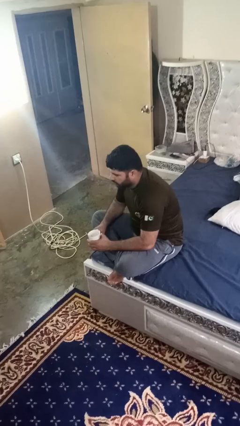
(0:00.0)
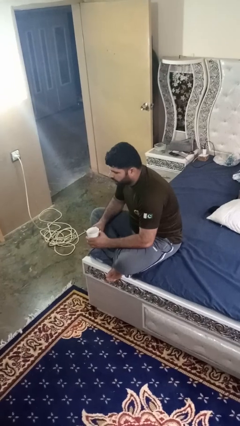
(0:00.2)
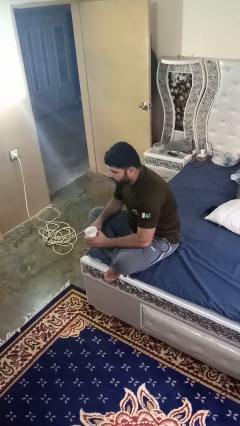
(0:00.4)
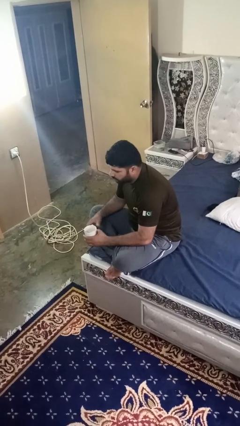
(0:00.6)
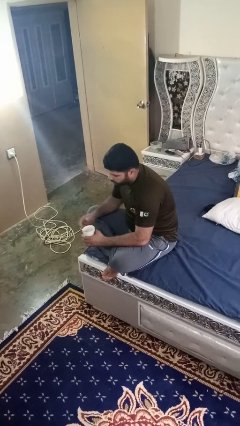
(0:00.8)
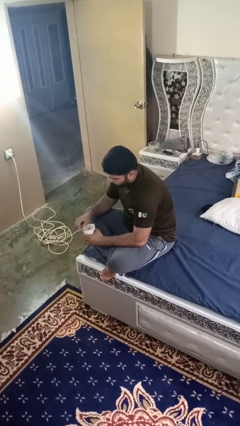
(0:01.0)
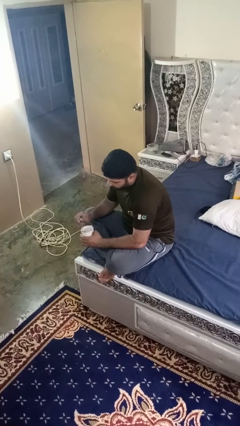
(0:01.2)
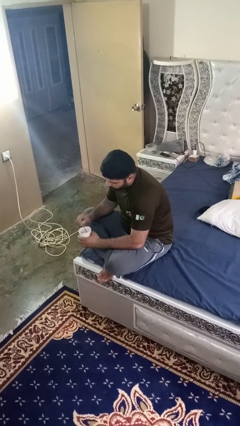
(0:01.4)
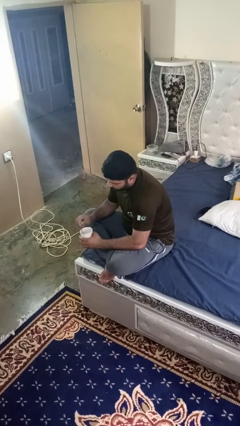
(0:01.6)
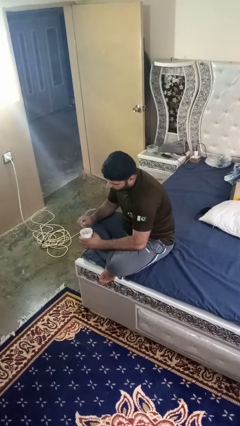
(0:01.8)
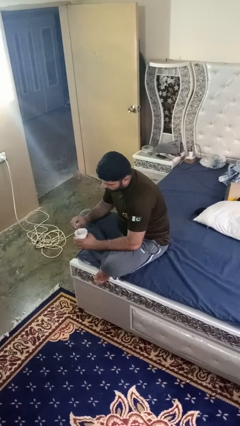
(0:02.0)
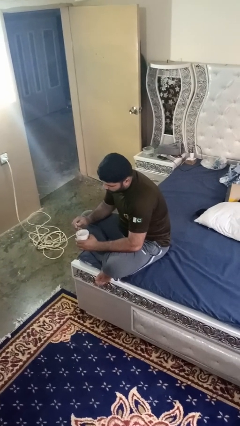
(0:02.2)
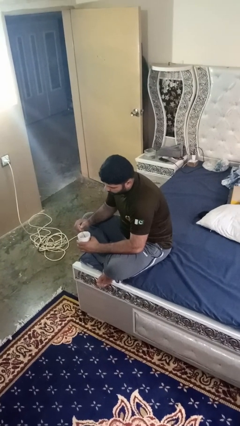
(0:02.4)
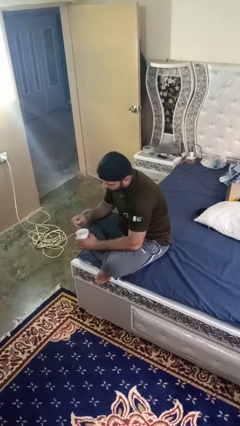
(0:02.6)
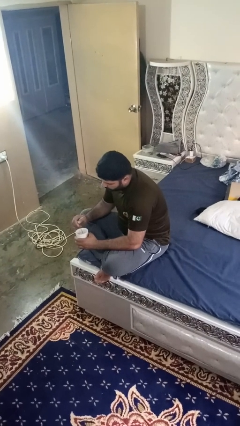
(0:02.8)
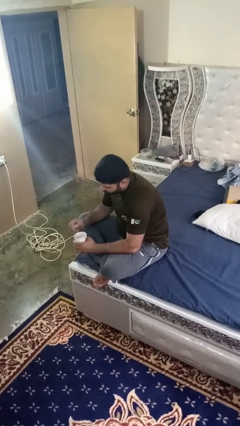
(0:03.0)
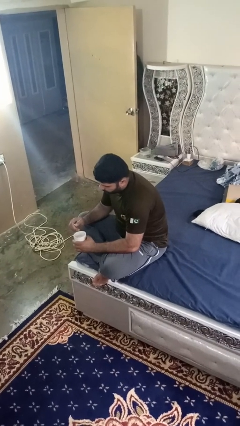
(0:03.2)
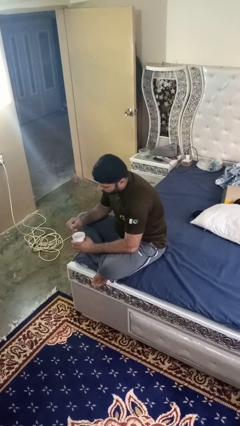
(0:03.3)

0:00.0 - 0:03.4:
person stirs mug

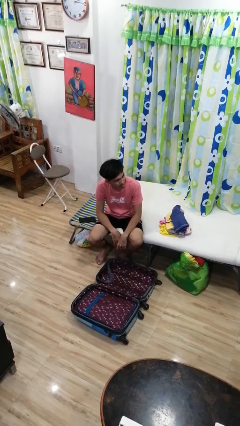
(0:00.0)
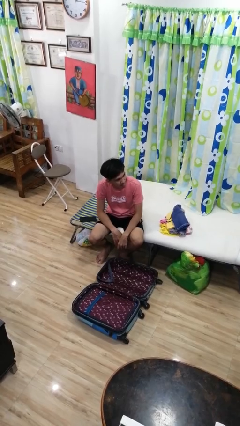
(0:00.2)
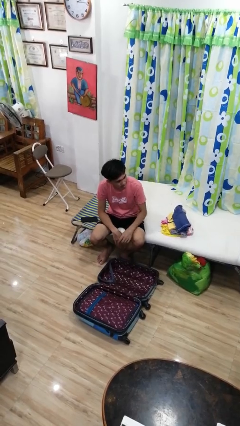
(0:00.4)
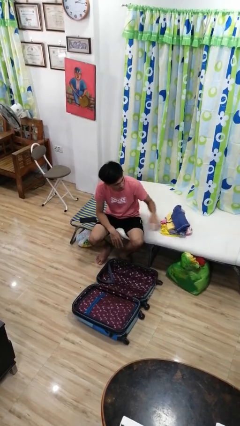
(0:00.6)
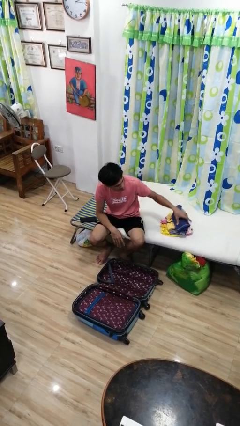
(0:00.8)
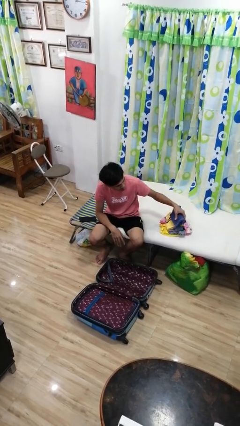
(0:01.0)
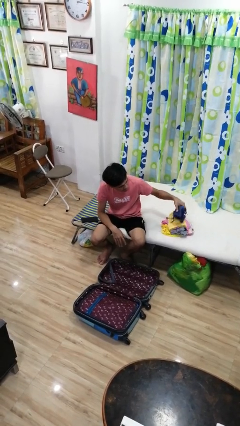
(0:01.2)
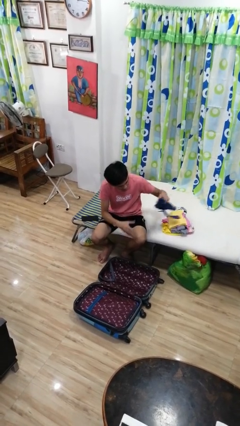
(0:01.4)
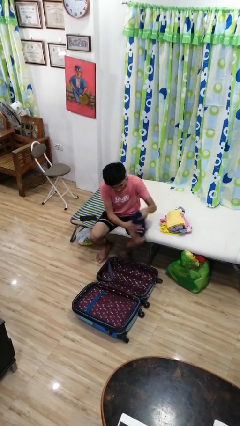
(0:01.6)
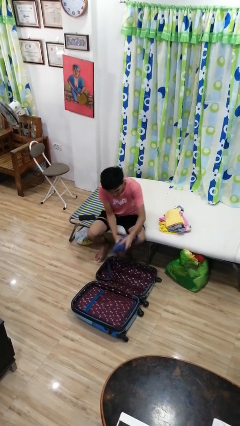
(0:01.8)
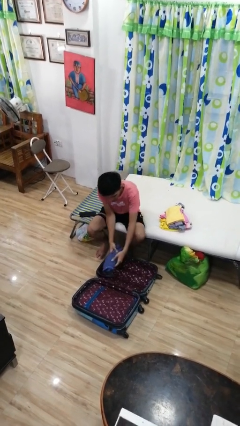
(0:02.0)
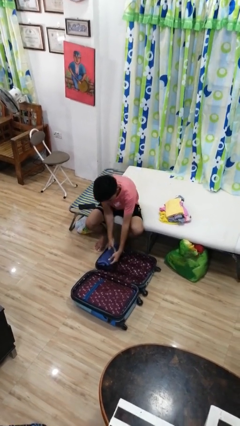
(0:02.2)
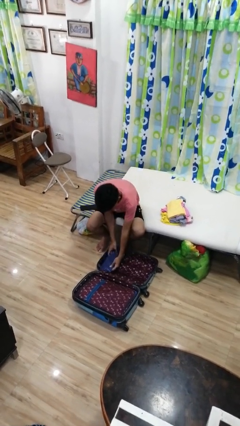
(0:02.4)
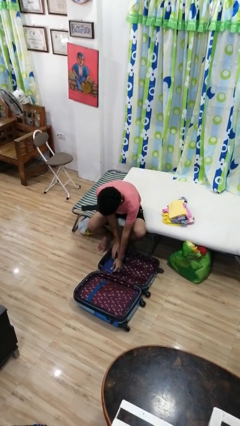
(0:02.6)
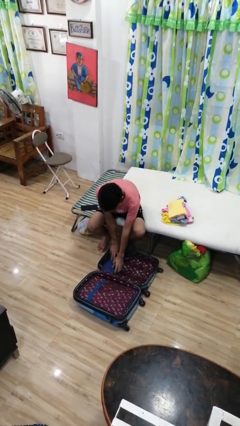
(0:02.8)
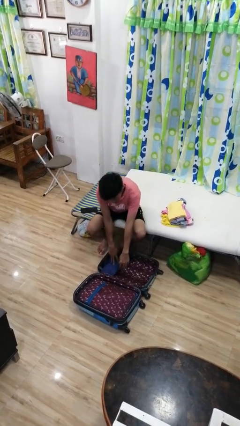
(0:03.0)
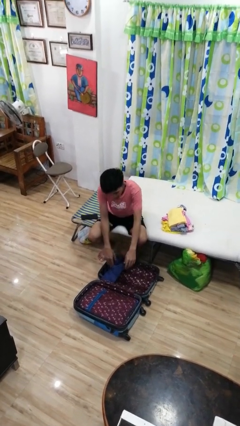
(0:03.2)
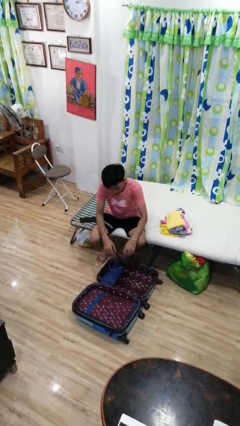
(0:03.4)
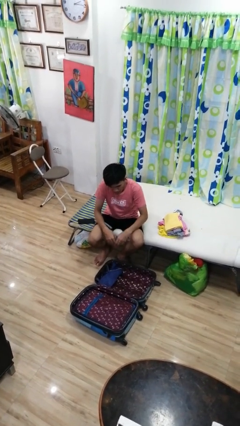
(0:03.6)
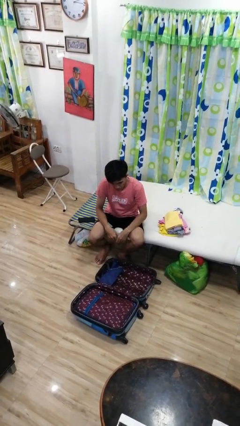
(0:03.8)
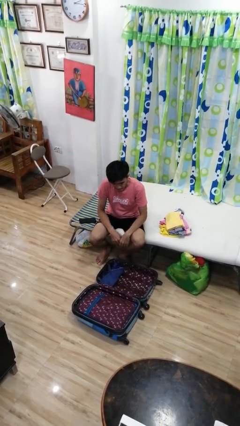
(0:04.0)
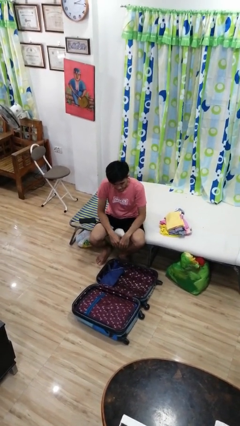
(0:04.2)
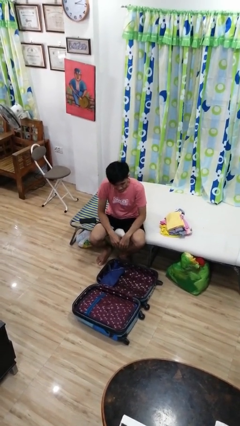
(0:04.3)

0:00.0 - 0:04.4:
person loads clothes into suitcase

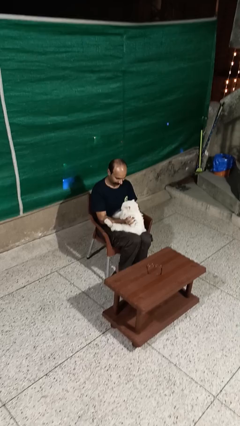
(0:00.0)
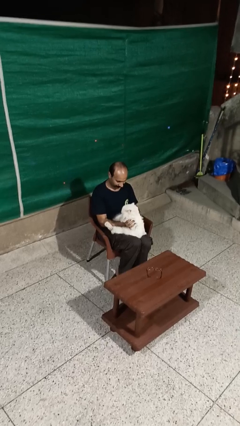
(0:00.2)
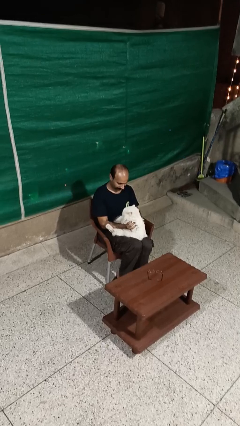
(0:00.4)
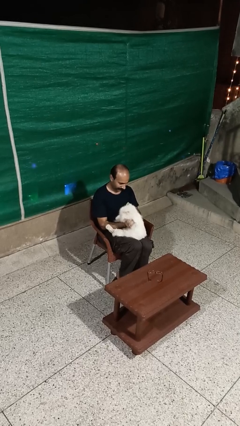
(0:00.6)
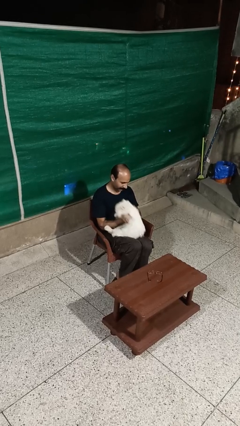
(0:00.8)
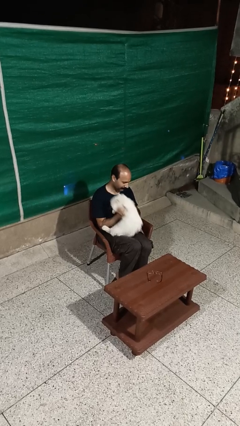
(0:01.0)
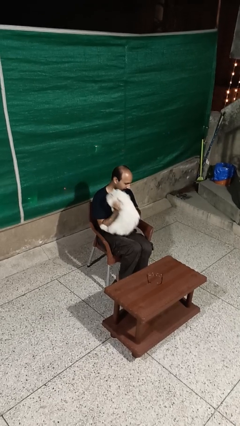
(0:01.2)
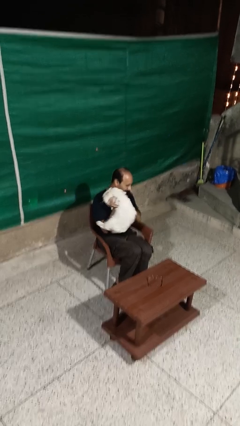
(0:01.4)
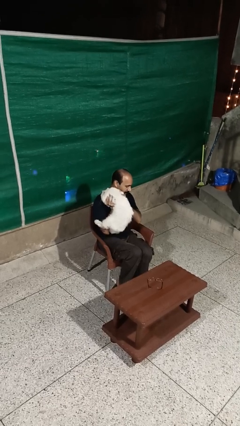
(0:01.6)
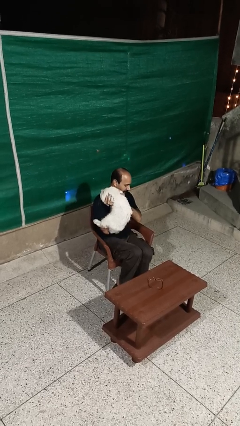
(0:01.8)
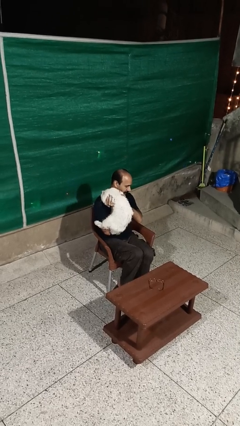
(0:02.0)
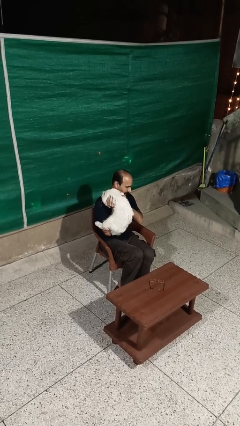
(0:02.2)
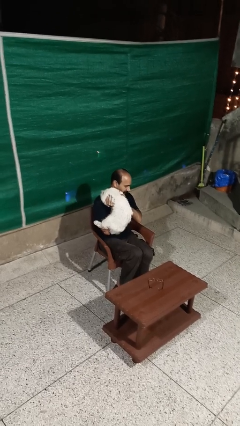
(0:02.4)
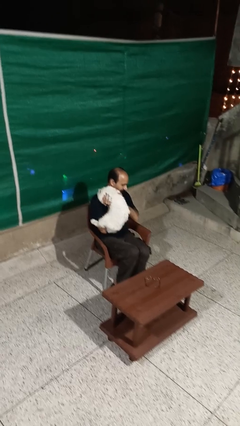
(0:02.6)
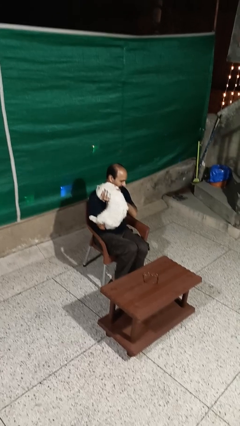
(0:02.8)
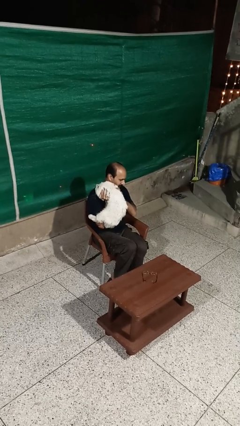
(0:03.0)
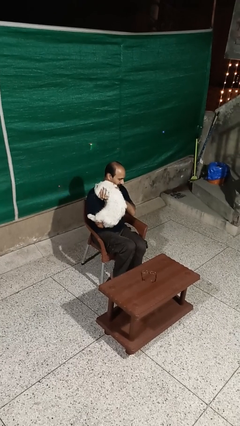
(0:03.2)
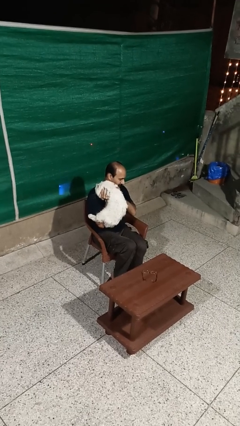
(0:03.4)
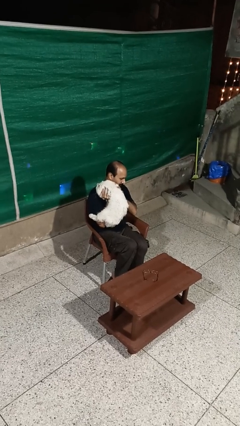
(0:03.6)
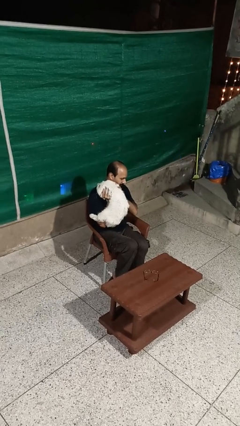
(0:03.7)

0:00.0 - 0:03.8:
person hugs dog

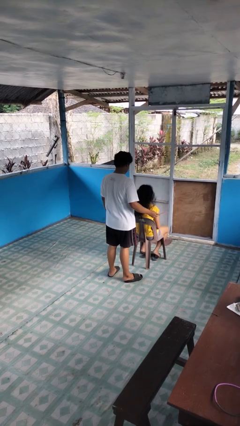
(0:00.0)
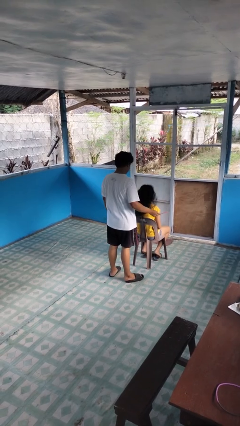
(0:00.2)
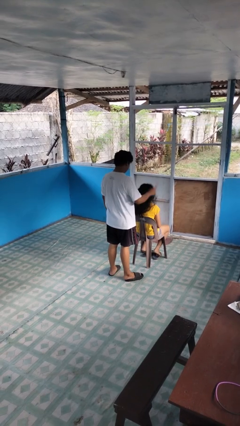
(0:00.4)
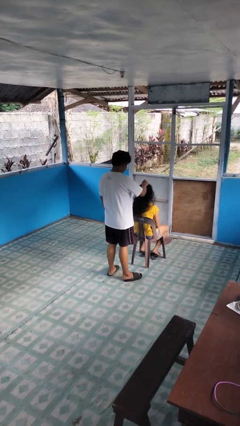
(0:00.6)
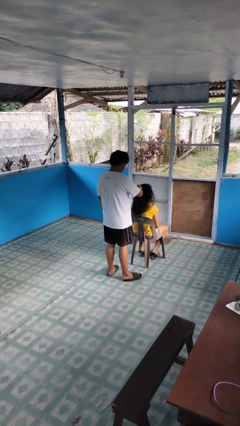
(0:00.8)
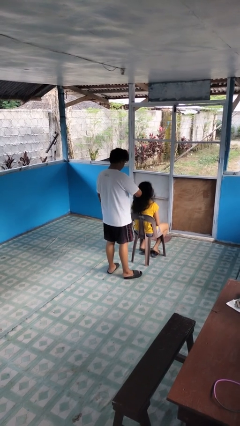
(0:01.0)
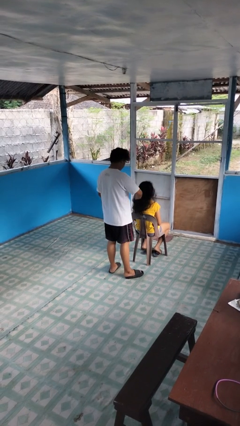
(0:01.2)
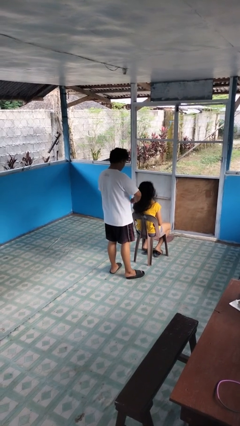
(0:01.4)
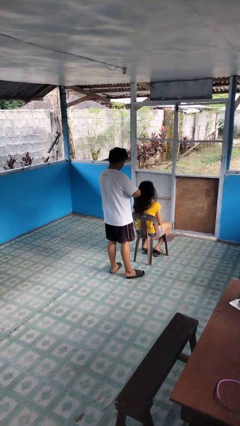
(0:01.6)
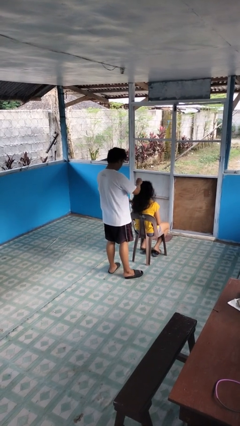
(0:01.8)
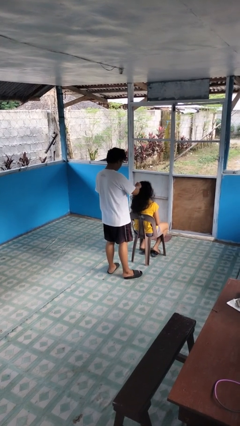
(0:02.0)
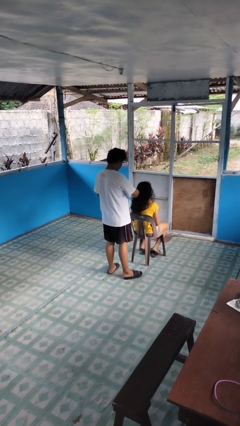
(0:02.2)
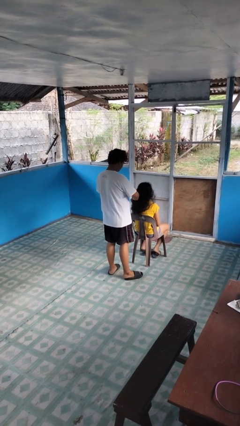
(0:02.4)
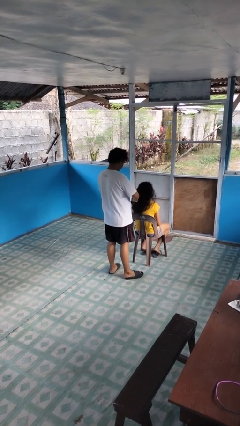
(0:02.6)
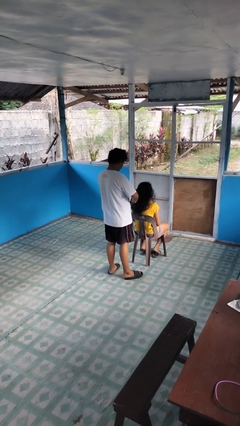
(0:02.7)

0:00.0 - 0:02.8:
person brushes hair of person

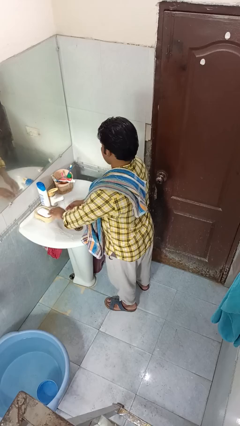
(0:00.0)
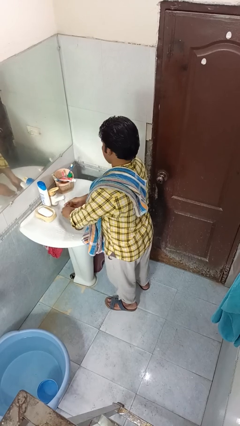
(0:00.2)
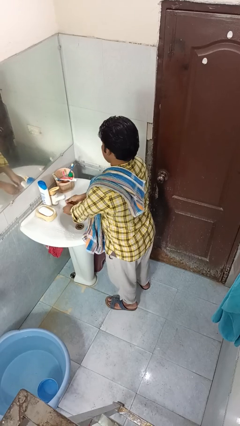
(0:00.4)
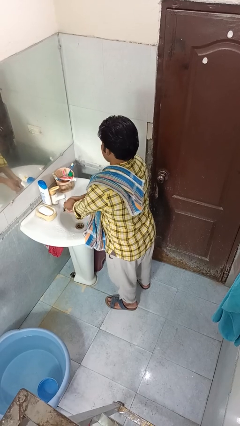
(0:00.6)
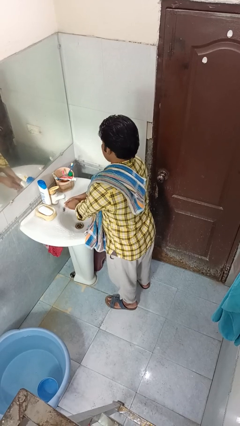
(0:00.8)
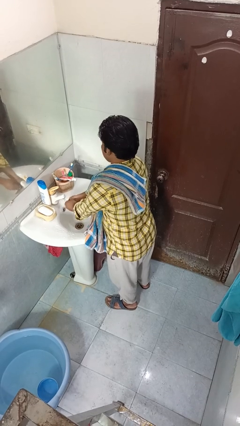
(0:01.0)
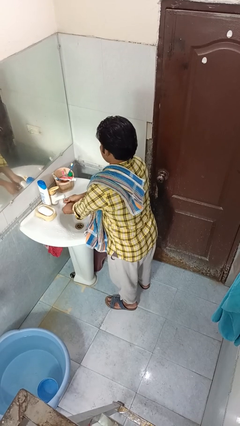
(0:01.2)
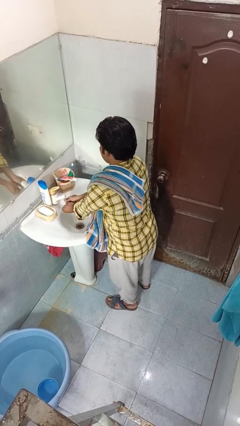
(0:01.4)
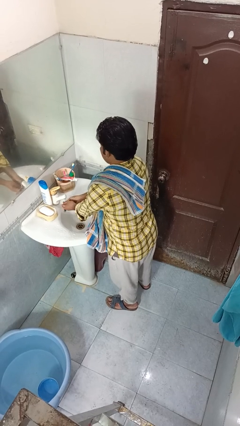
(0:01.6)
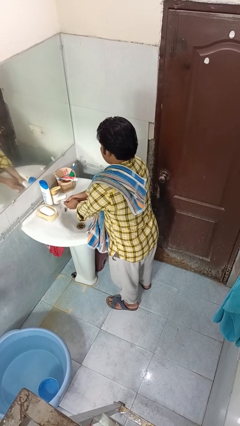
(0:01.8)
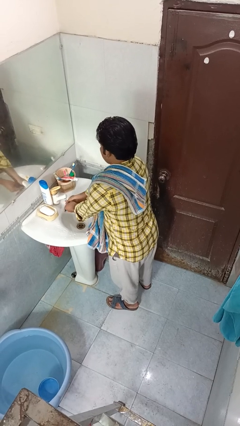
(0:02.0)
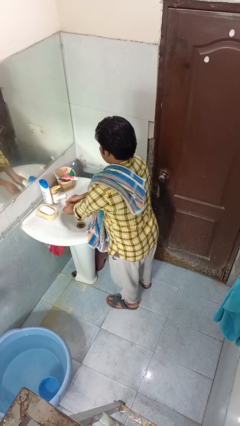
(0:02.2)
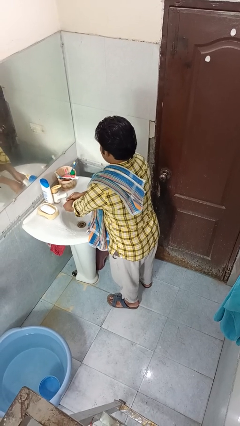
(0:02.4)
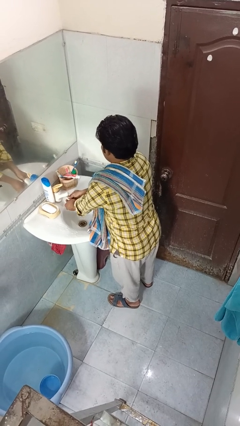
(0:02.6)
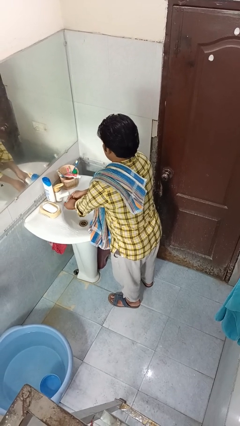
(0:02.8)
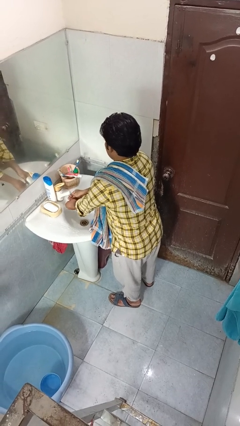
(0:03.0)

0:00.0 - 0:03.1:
person washes hands
